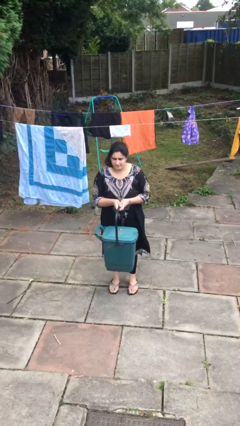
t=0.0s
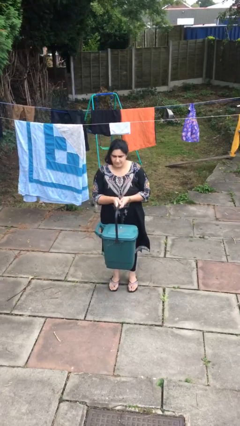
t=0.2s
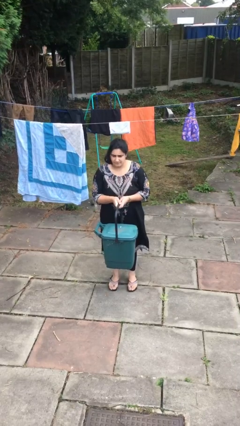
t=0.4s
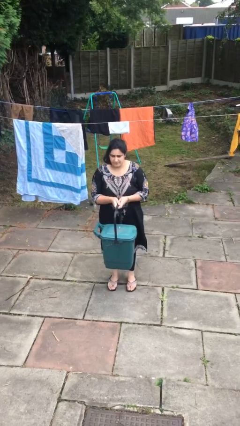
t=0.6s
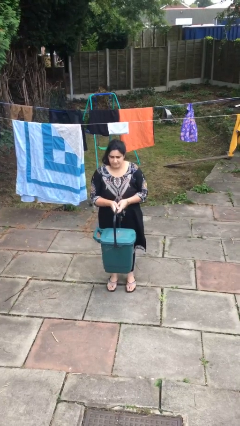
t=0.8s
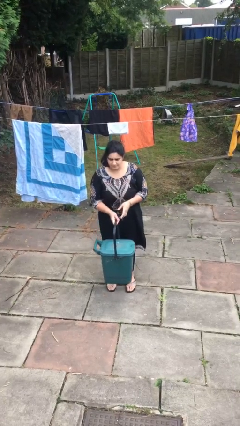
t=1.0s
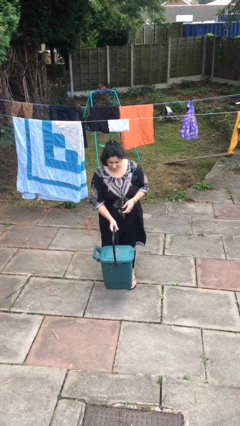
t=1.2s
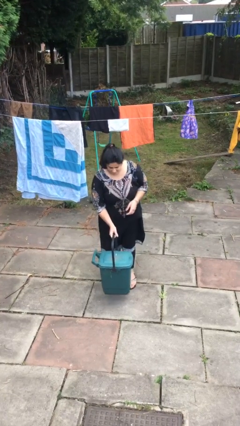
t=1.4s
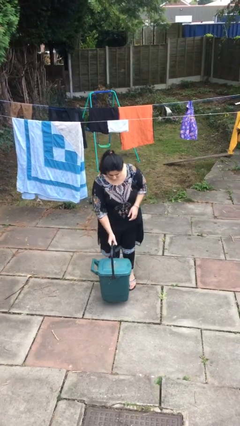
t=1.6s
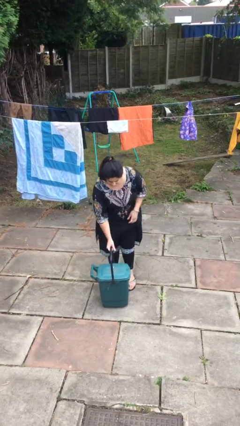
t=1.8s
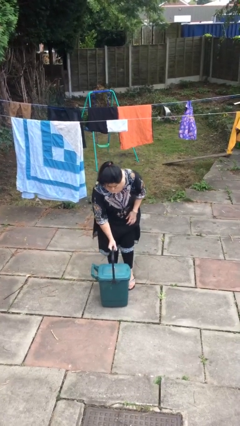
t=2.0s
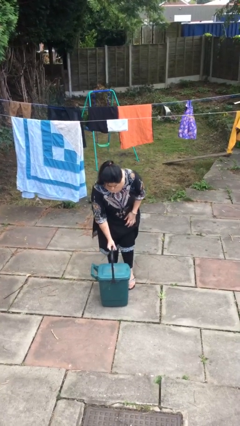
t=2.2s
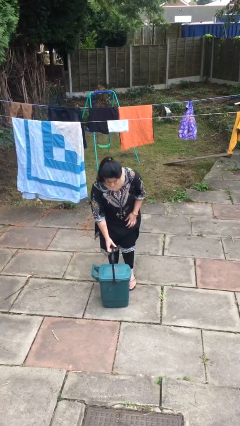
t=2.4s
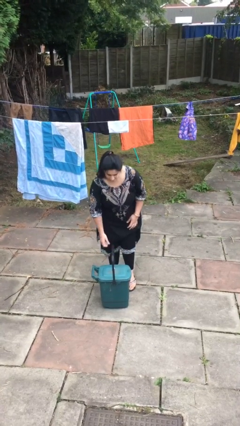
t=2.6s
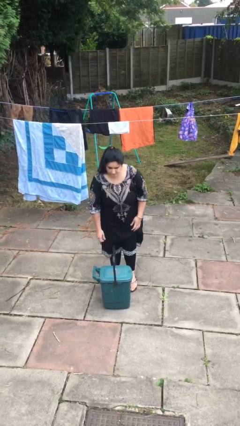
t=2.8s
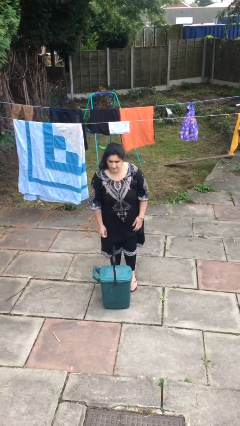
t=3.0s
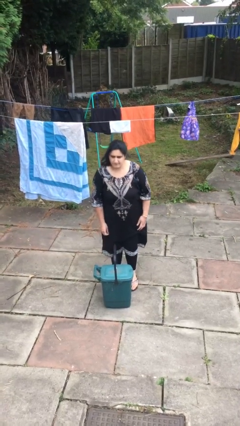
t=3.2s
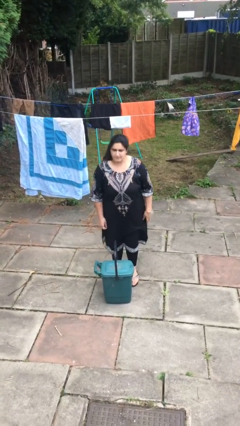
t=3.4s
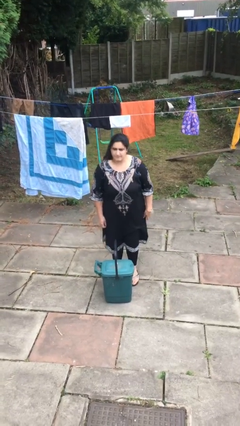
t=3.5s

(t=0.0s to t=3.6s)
person puts down object on floor

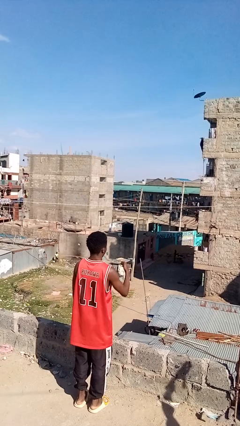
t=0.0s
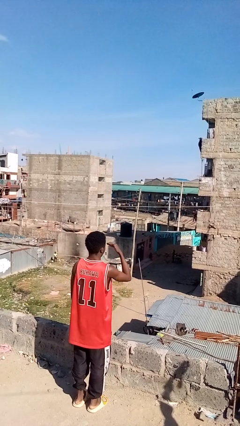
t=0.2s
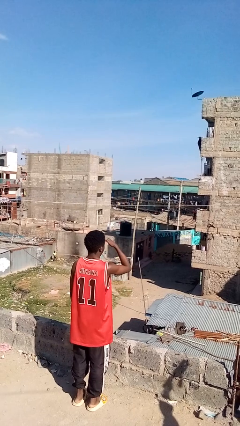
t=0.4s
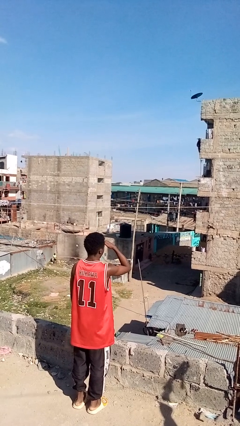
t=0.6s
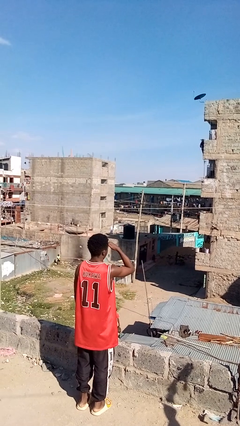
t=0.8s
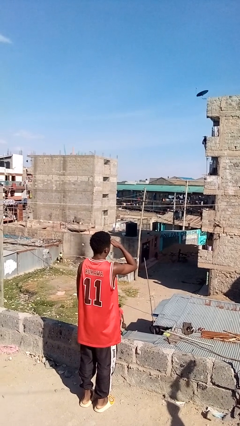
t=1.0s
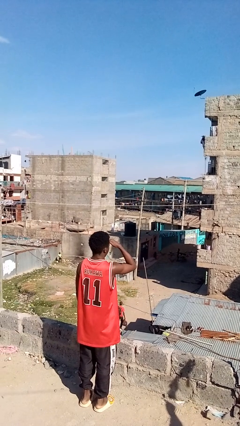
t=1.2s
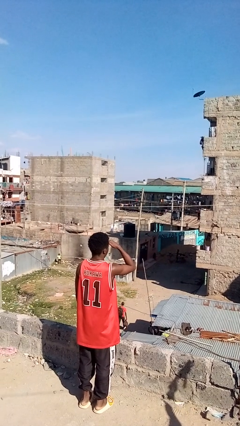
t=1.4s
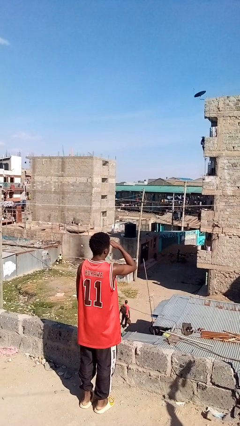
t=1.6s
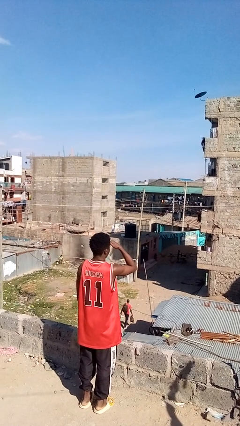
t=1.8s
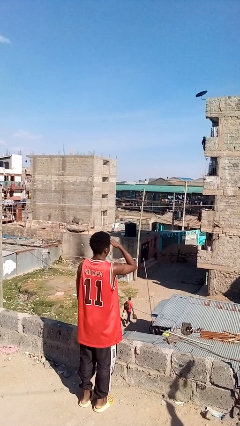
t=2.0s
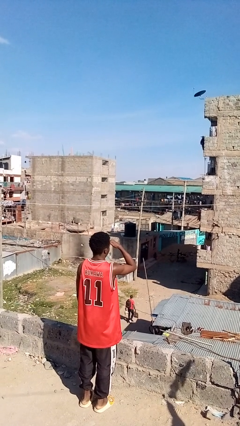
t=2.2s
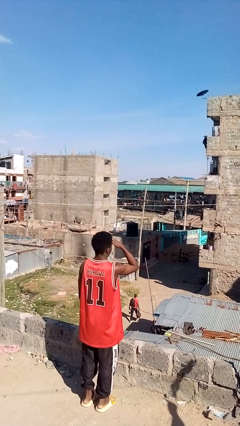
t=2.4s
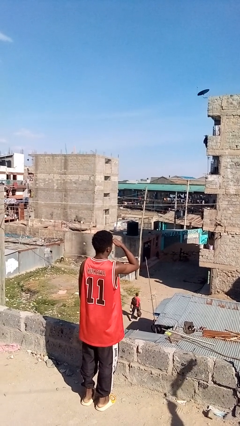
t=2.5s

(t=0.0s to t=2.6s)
person shades eyes

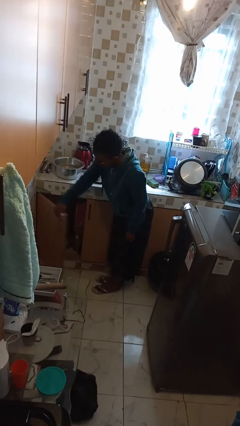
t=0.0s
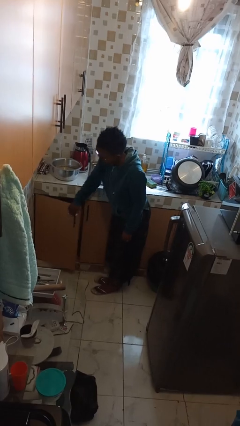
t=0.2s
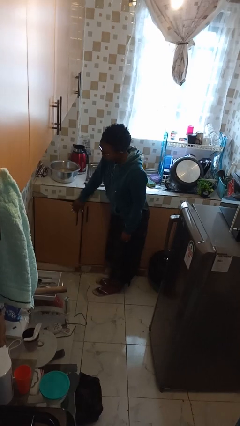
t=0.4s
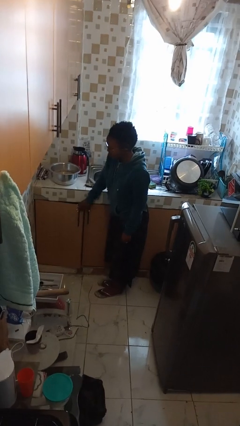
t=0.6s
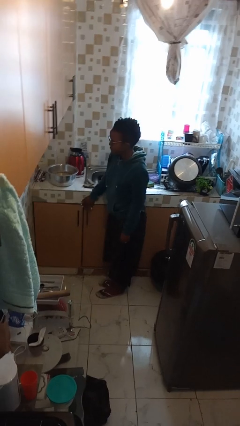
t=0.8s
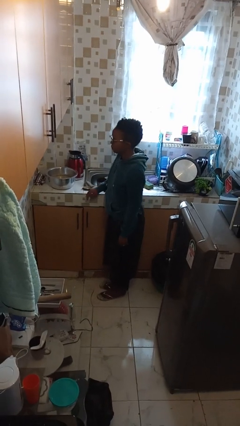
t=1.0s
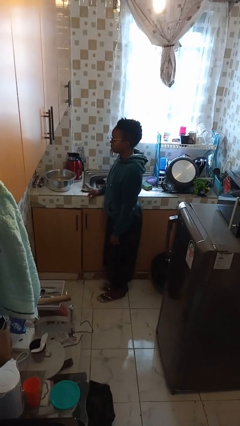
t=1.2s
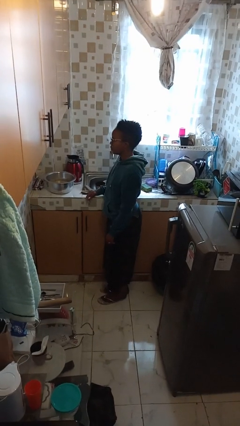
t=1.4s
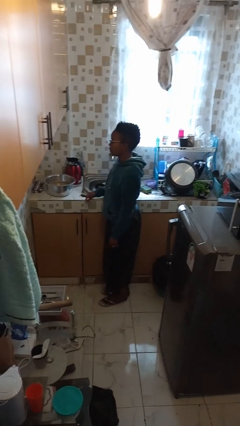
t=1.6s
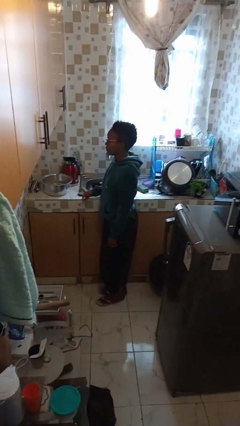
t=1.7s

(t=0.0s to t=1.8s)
person closes cabinet

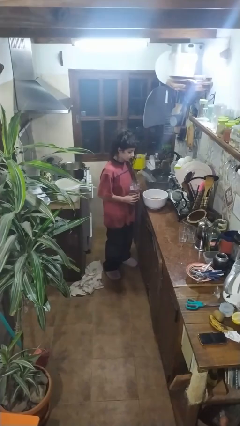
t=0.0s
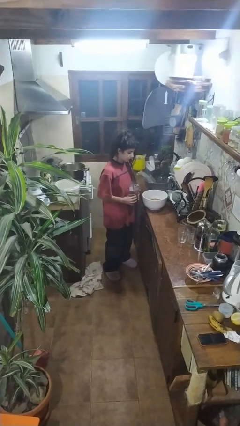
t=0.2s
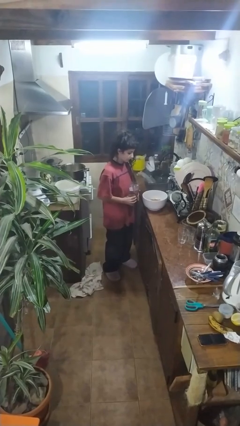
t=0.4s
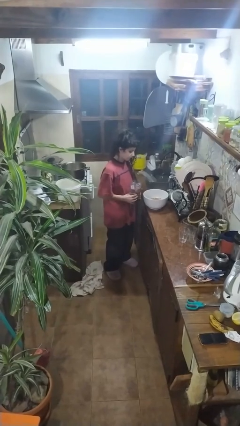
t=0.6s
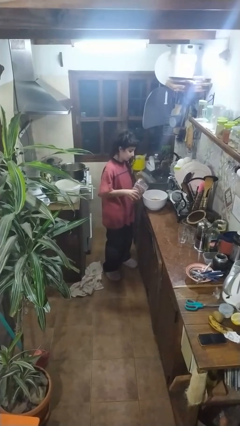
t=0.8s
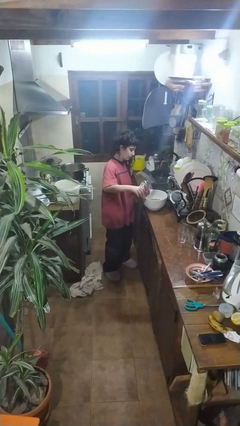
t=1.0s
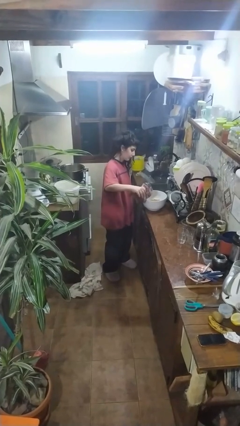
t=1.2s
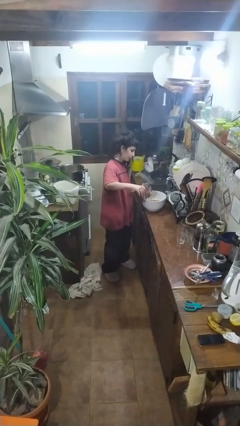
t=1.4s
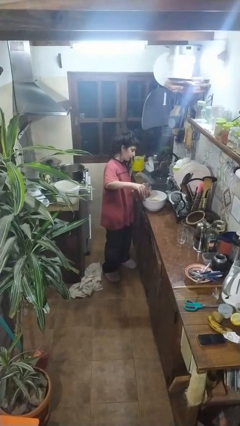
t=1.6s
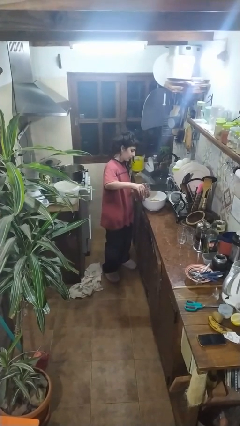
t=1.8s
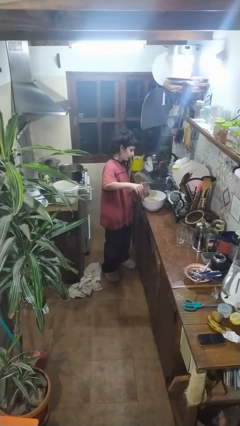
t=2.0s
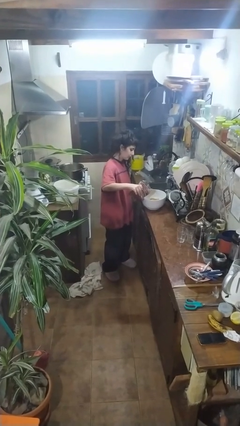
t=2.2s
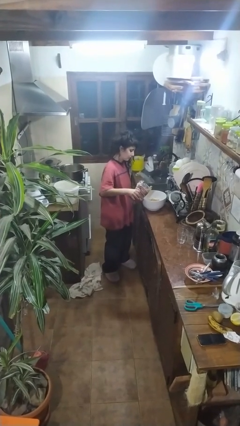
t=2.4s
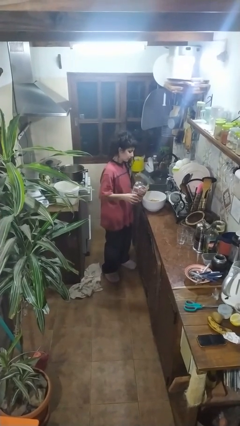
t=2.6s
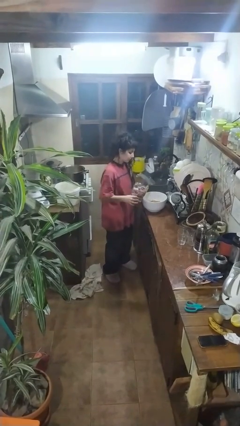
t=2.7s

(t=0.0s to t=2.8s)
person pours into bowl

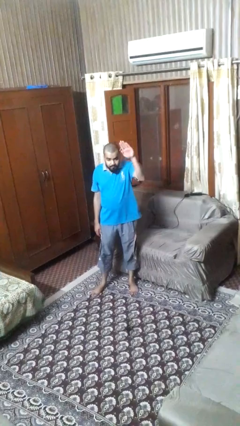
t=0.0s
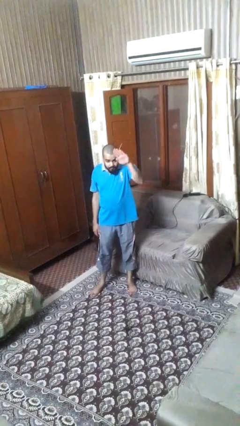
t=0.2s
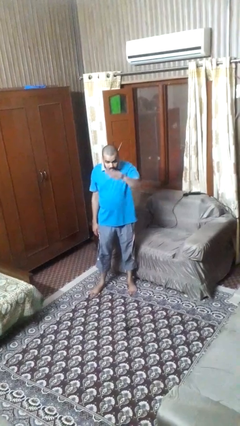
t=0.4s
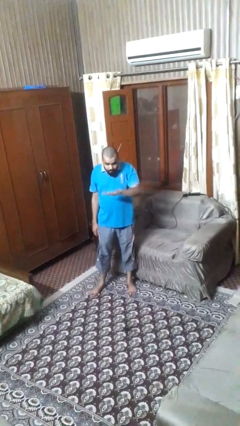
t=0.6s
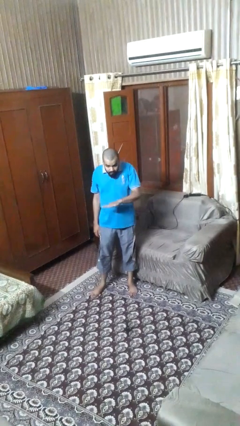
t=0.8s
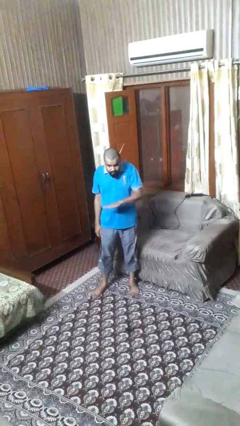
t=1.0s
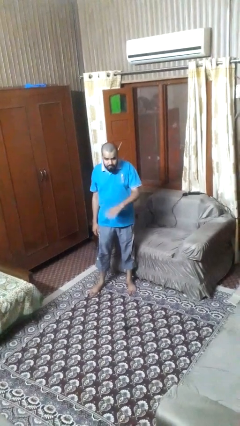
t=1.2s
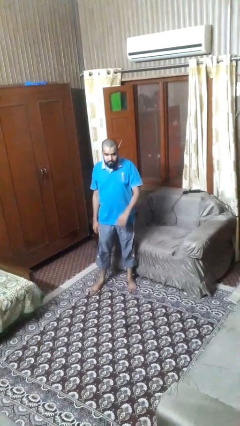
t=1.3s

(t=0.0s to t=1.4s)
person gestures swipe down

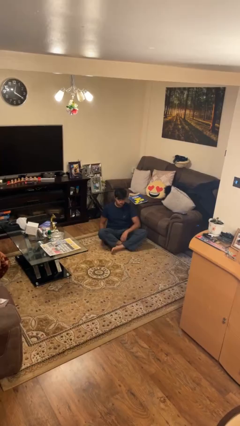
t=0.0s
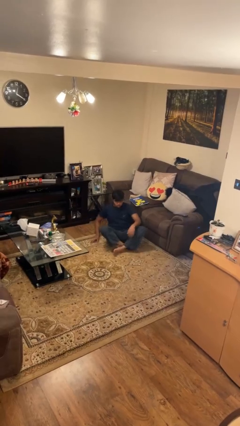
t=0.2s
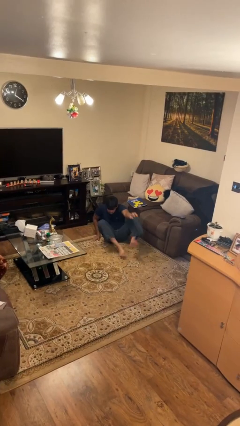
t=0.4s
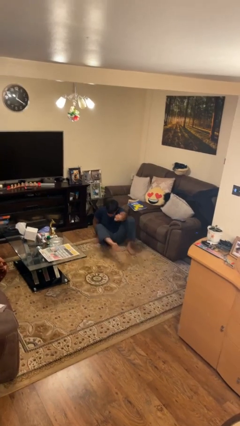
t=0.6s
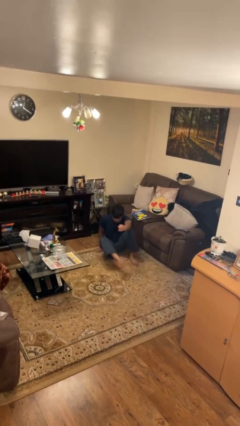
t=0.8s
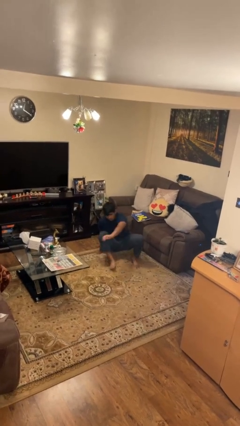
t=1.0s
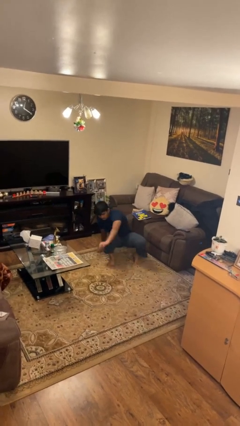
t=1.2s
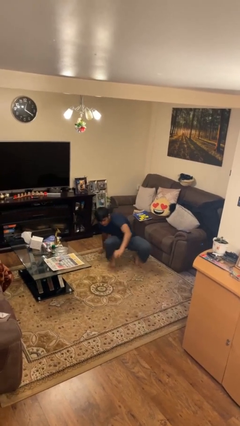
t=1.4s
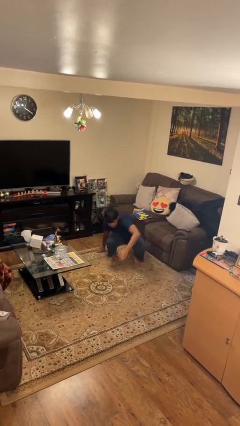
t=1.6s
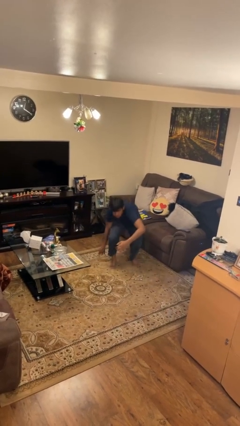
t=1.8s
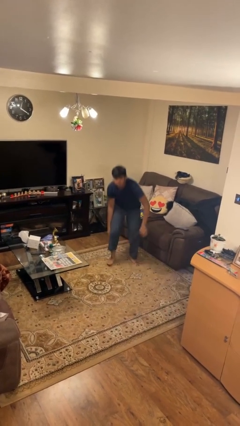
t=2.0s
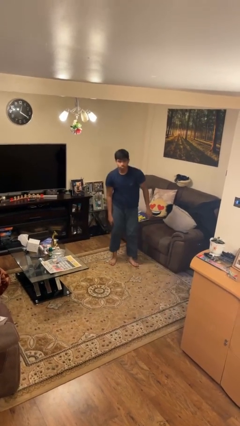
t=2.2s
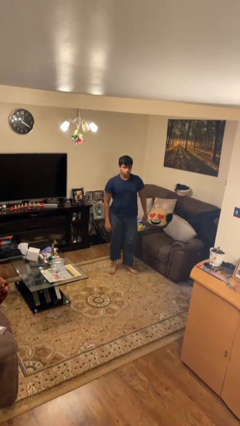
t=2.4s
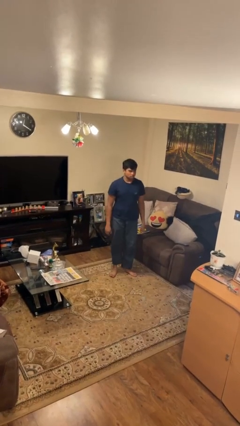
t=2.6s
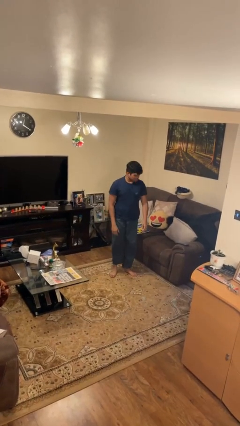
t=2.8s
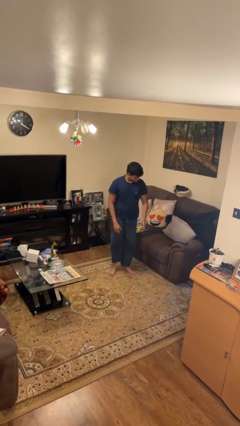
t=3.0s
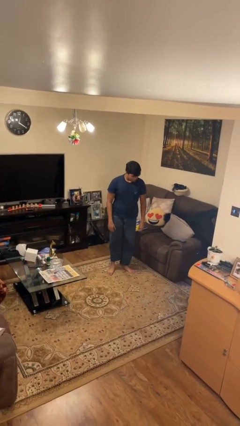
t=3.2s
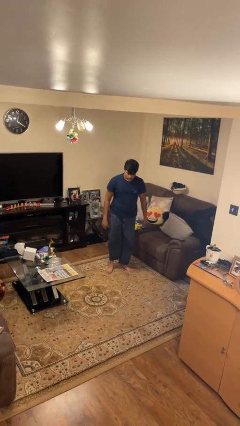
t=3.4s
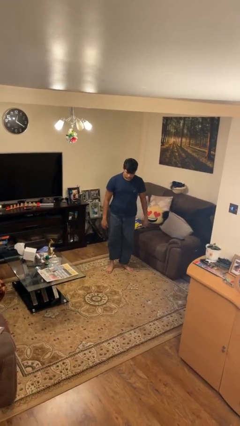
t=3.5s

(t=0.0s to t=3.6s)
person stands up from floor

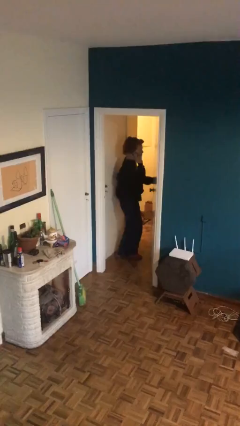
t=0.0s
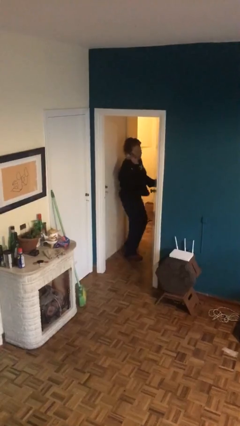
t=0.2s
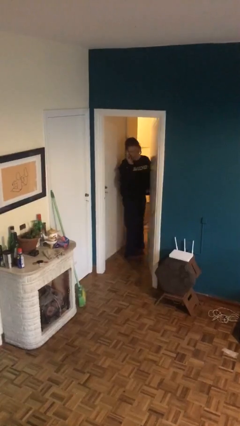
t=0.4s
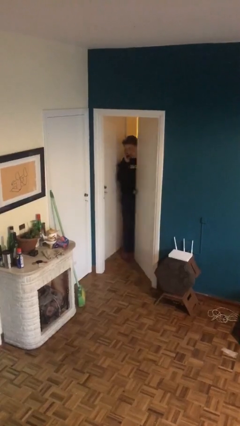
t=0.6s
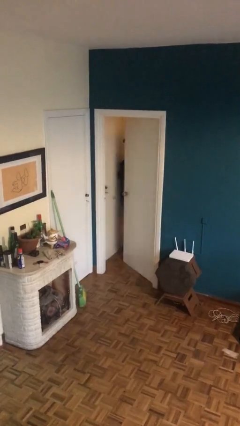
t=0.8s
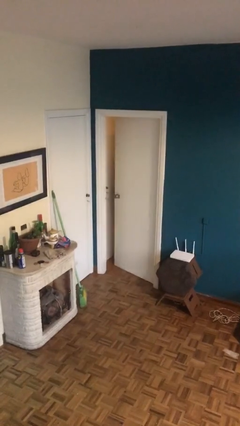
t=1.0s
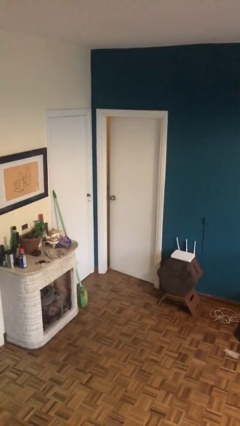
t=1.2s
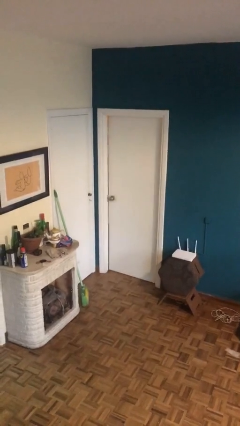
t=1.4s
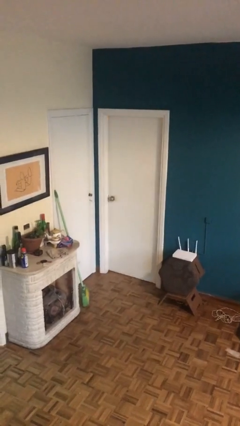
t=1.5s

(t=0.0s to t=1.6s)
person closes facility door
